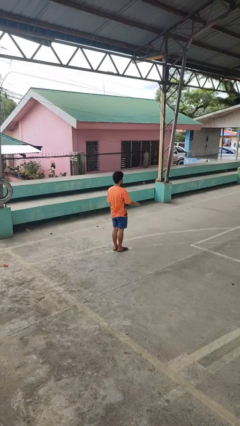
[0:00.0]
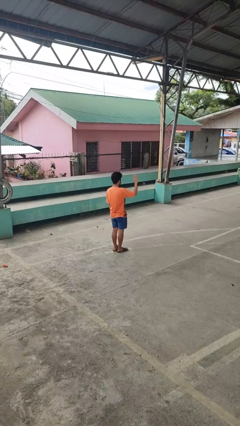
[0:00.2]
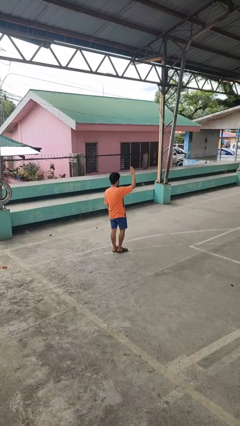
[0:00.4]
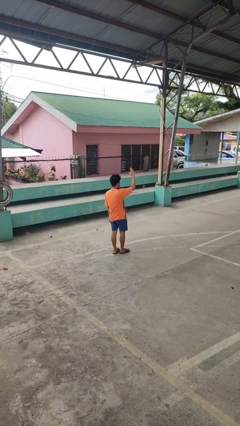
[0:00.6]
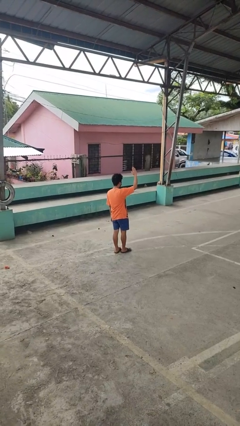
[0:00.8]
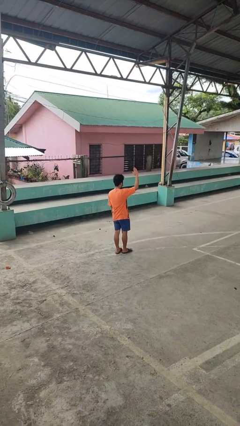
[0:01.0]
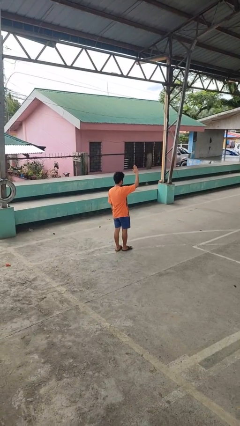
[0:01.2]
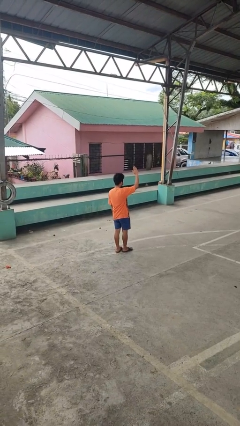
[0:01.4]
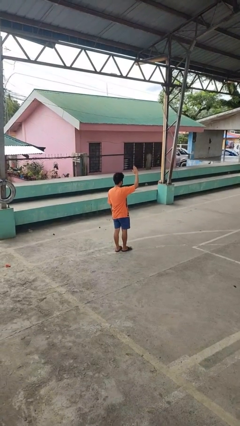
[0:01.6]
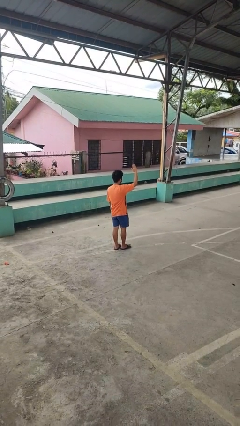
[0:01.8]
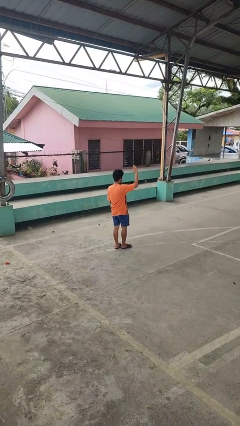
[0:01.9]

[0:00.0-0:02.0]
person gestures raise hand

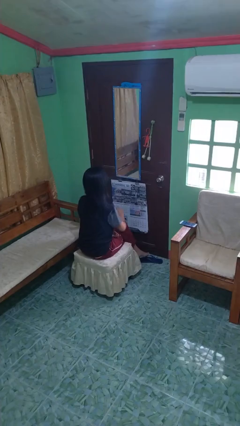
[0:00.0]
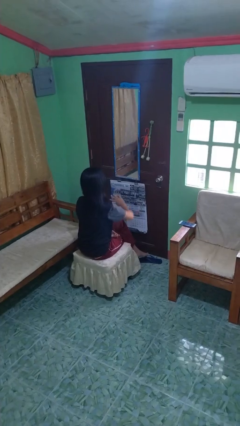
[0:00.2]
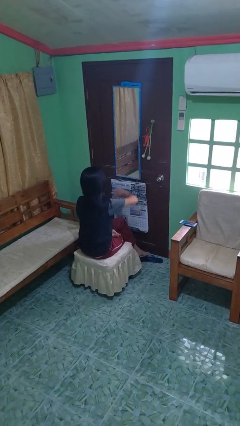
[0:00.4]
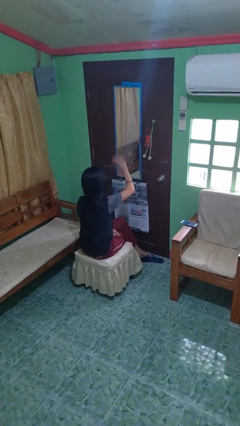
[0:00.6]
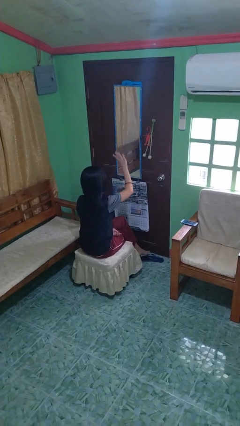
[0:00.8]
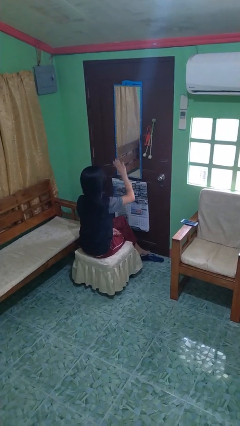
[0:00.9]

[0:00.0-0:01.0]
person gestures swipe down

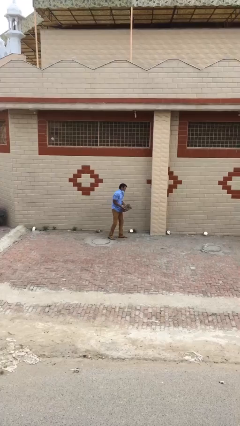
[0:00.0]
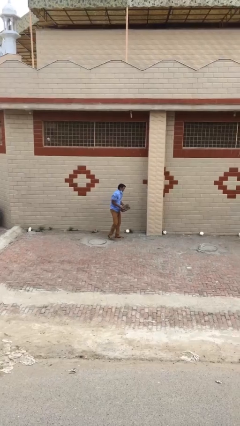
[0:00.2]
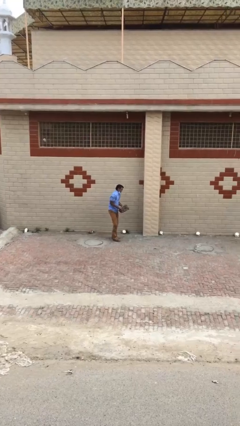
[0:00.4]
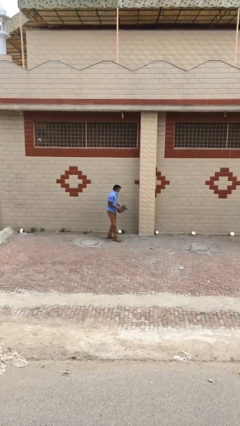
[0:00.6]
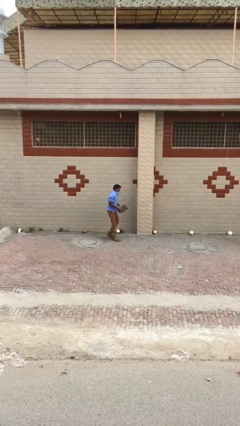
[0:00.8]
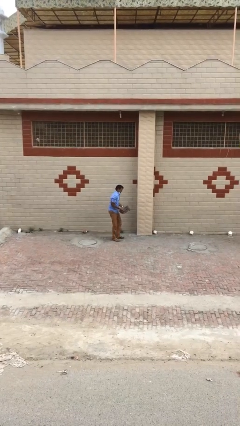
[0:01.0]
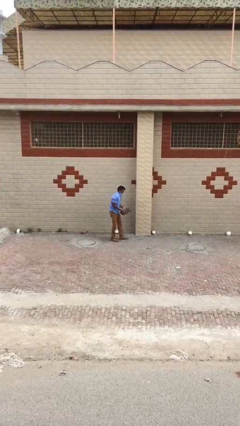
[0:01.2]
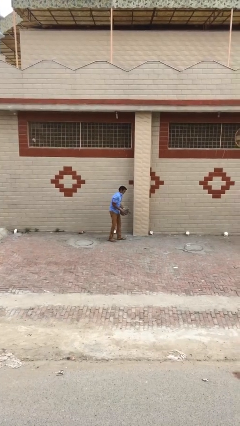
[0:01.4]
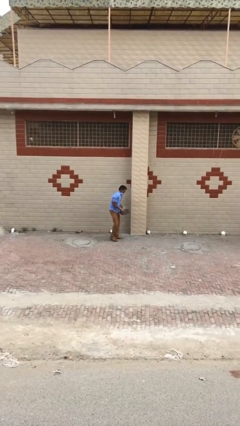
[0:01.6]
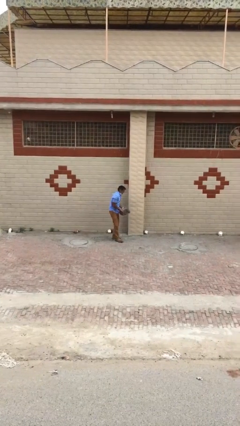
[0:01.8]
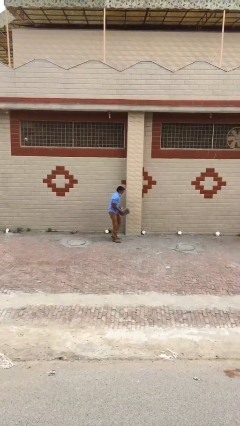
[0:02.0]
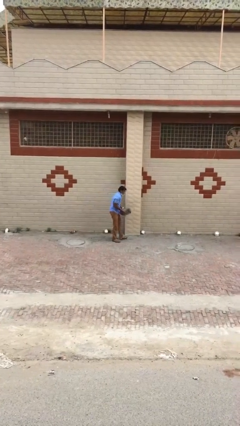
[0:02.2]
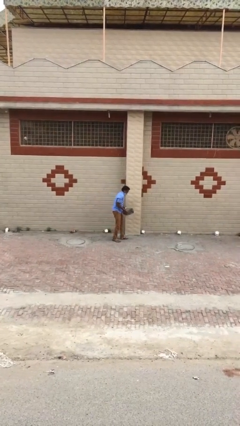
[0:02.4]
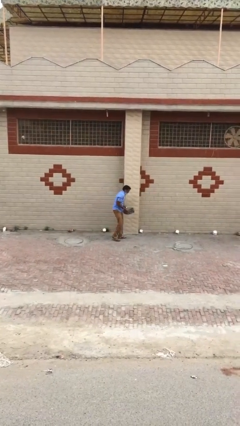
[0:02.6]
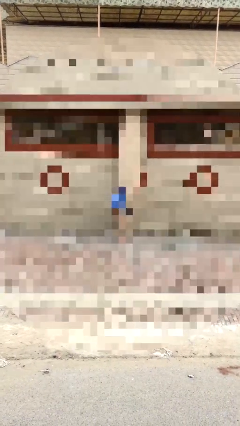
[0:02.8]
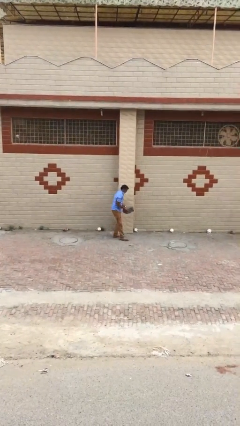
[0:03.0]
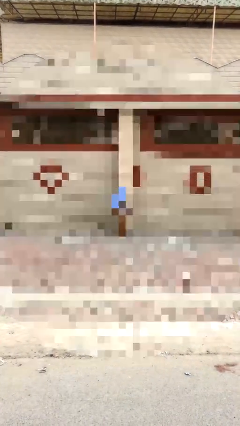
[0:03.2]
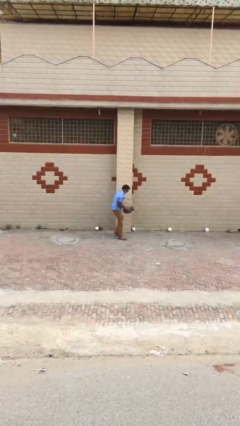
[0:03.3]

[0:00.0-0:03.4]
person carries heavy object

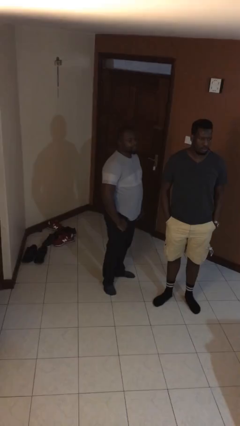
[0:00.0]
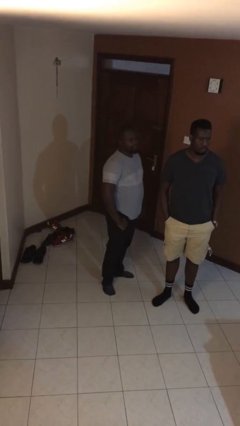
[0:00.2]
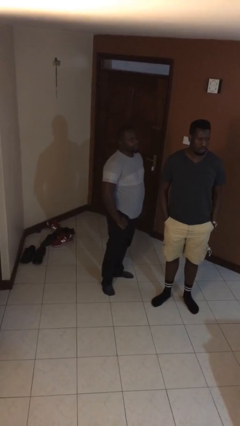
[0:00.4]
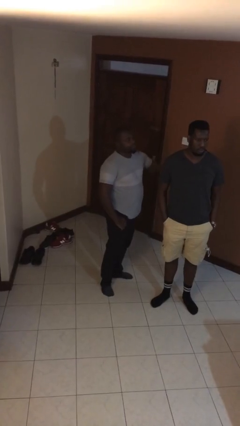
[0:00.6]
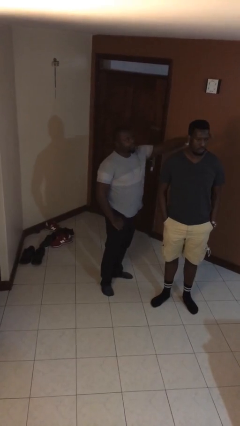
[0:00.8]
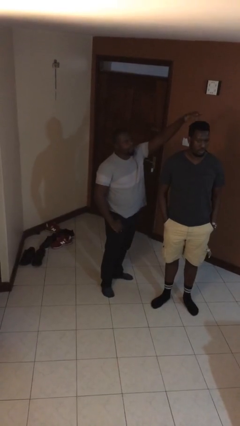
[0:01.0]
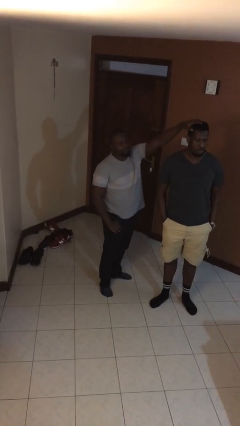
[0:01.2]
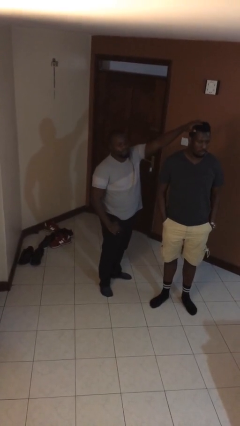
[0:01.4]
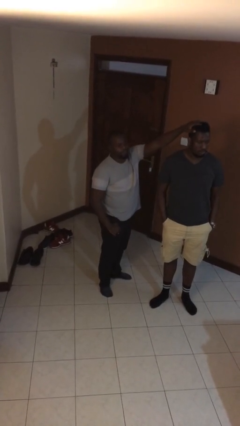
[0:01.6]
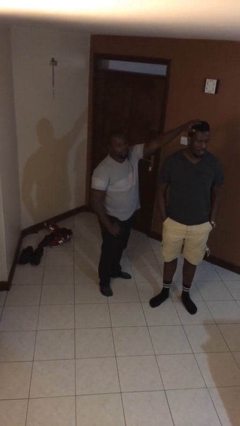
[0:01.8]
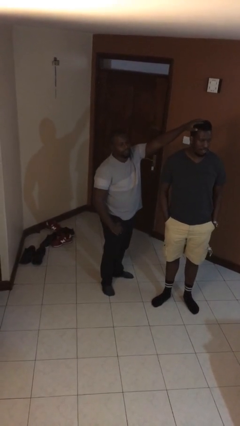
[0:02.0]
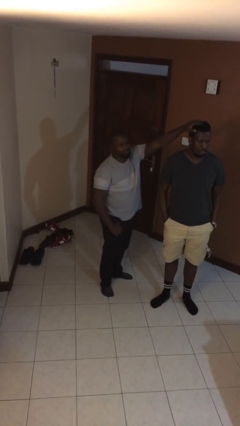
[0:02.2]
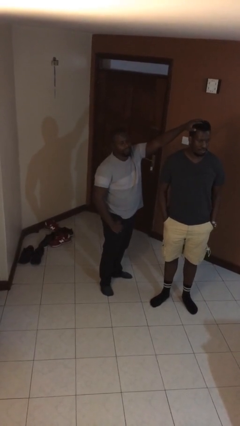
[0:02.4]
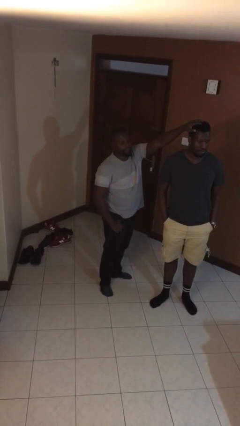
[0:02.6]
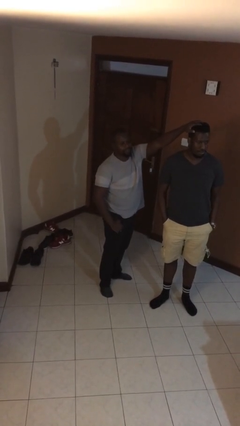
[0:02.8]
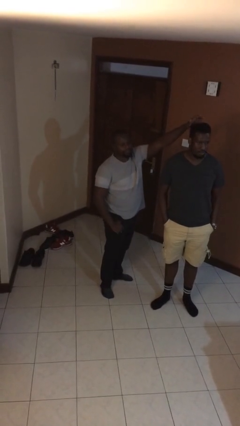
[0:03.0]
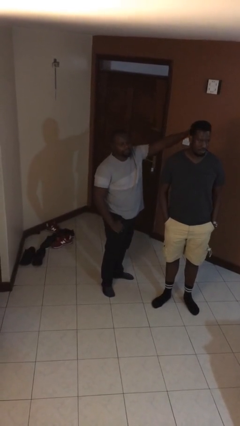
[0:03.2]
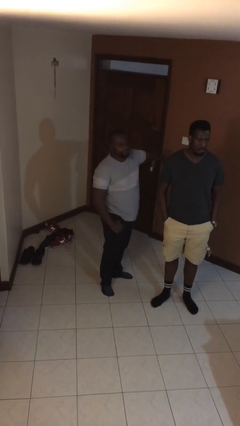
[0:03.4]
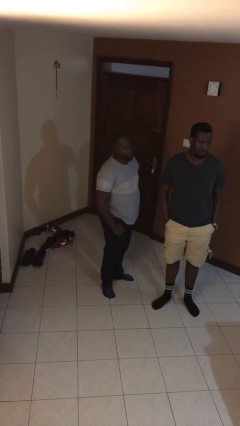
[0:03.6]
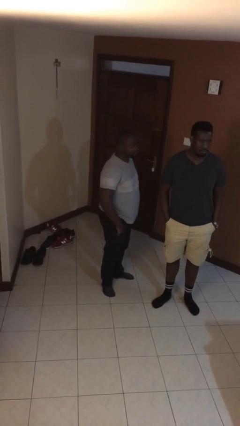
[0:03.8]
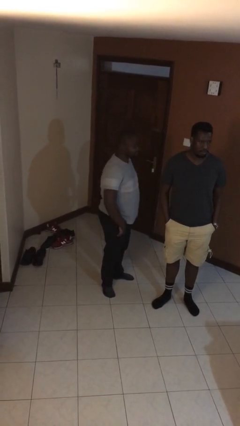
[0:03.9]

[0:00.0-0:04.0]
person grabs person by hair

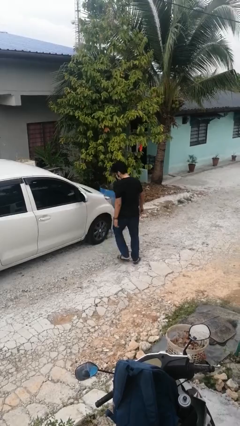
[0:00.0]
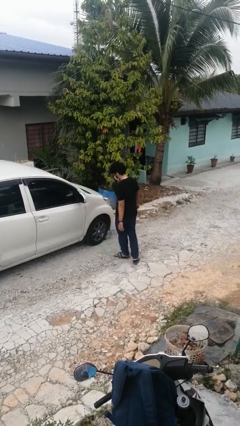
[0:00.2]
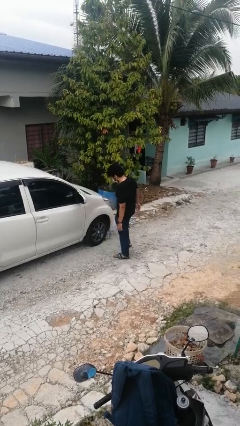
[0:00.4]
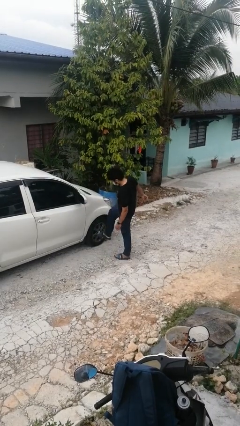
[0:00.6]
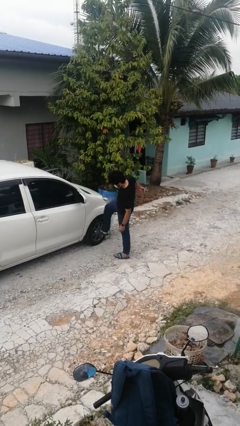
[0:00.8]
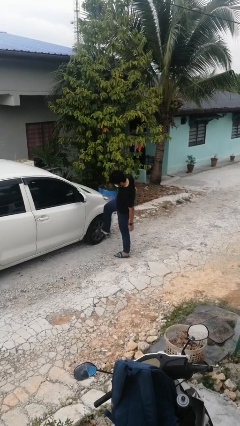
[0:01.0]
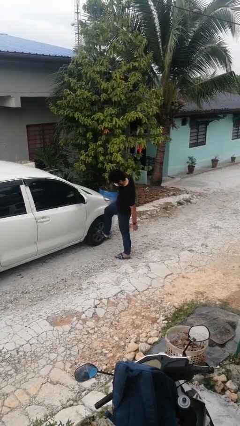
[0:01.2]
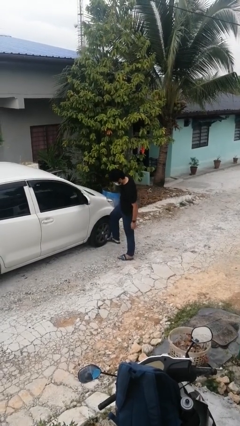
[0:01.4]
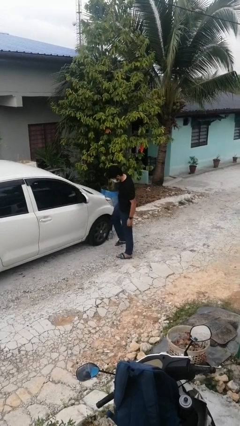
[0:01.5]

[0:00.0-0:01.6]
person kicks car tires

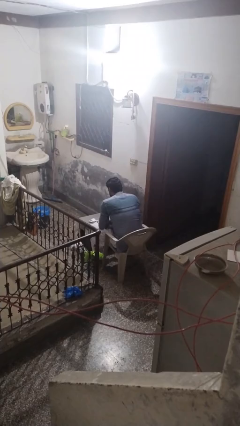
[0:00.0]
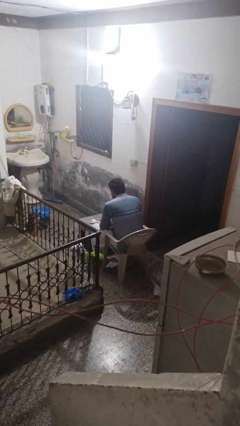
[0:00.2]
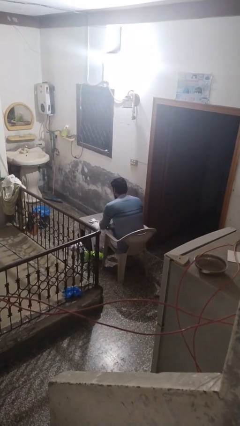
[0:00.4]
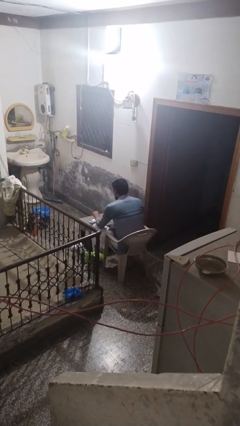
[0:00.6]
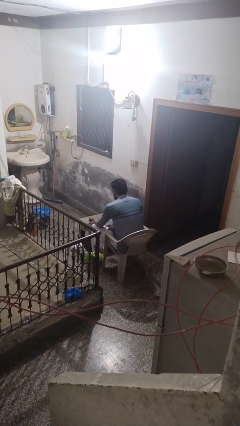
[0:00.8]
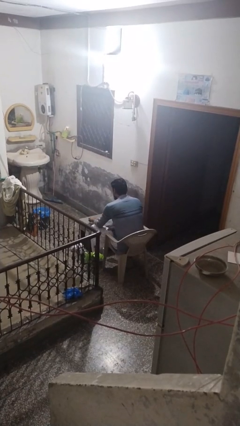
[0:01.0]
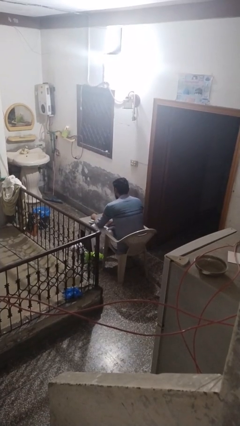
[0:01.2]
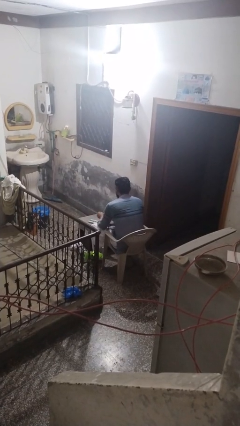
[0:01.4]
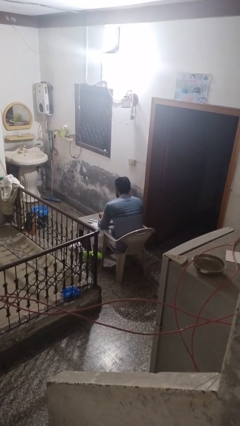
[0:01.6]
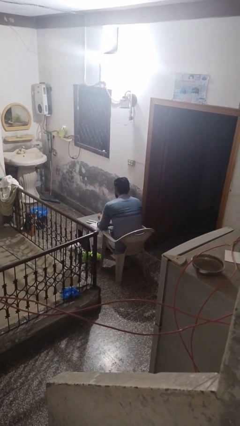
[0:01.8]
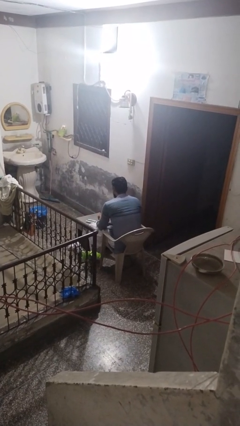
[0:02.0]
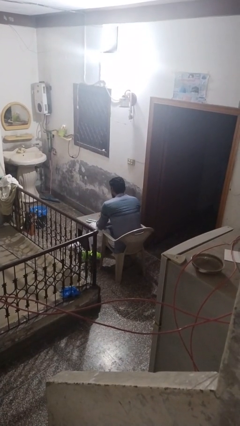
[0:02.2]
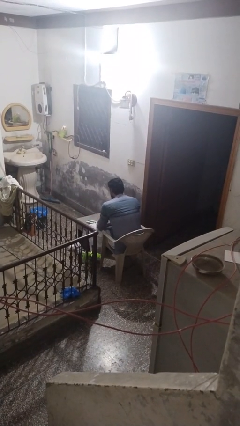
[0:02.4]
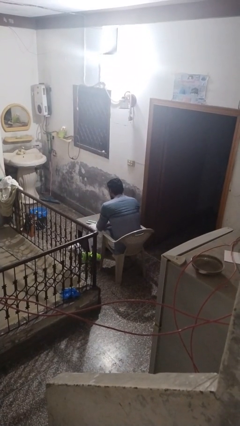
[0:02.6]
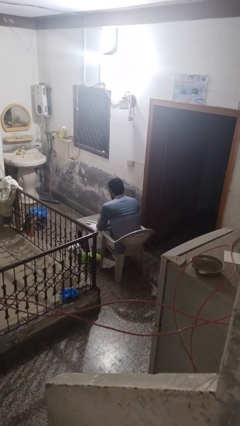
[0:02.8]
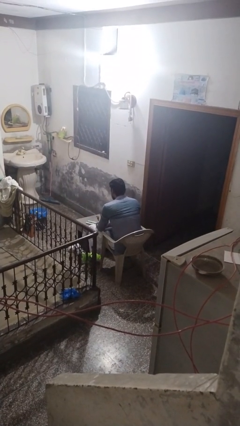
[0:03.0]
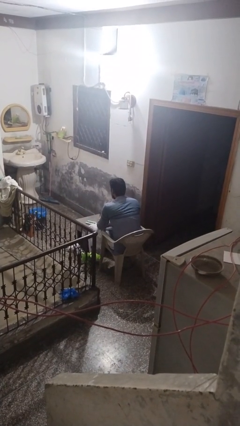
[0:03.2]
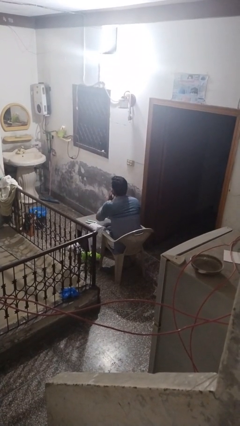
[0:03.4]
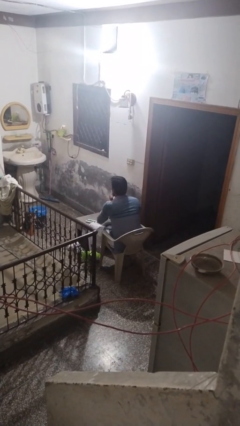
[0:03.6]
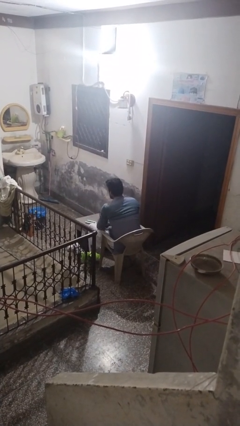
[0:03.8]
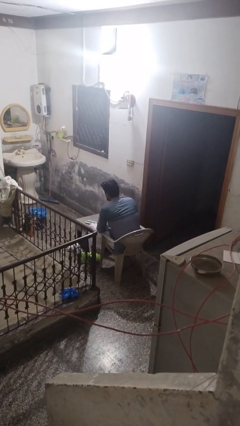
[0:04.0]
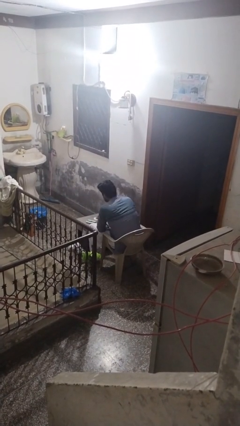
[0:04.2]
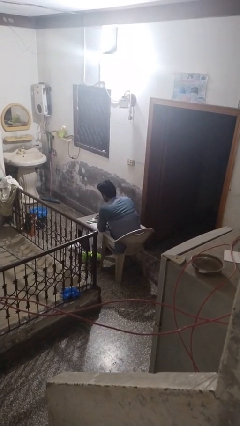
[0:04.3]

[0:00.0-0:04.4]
person takes medicine pills

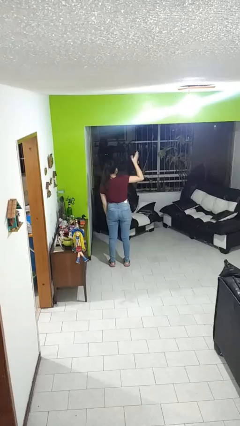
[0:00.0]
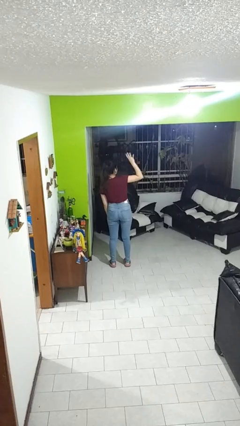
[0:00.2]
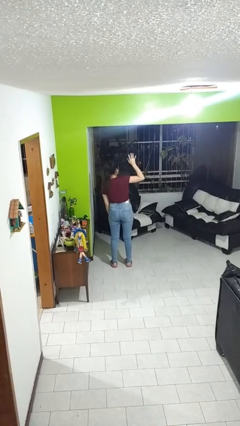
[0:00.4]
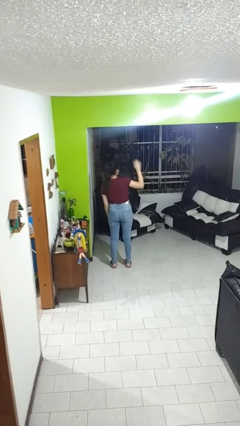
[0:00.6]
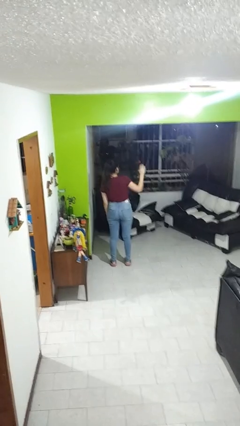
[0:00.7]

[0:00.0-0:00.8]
person waves at person
